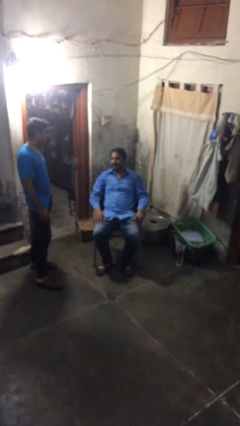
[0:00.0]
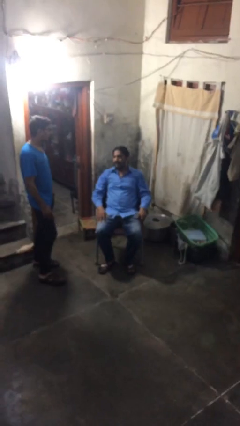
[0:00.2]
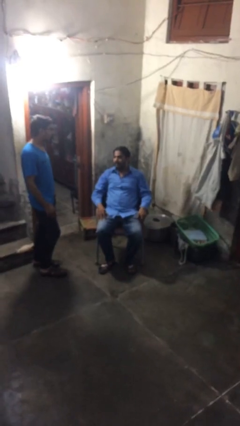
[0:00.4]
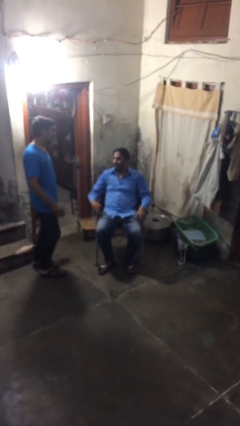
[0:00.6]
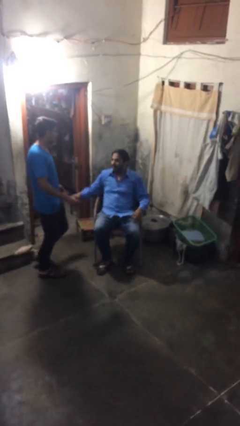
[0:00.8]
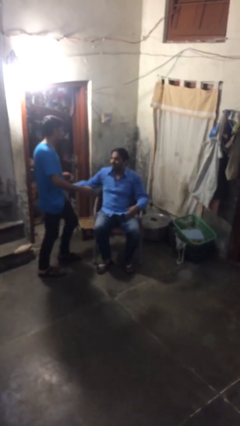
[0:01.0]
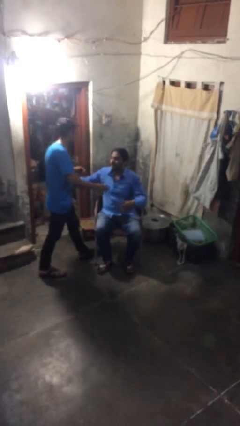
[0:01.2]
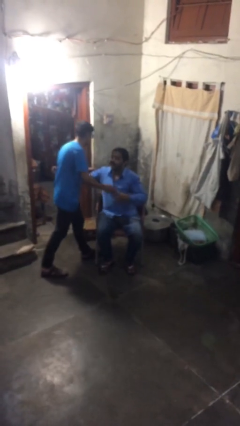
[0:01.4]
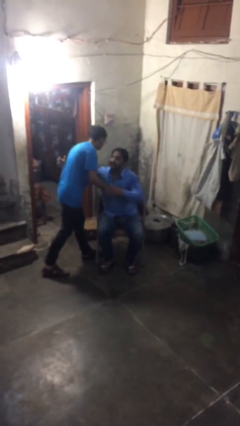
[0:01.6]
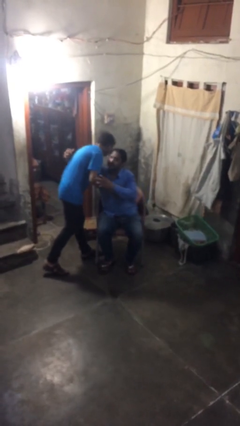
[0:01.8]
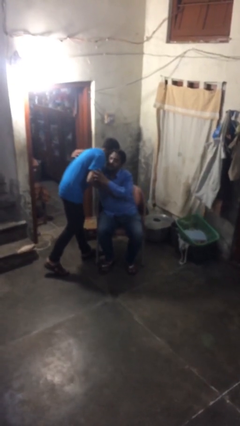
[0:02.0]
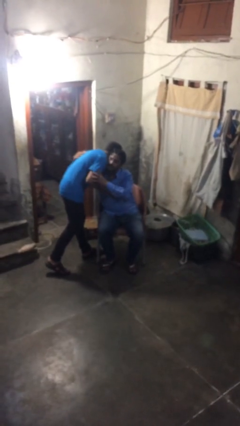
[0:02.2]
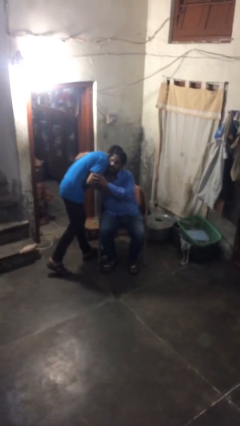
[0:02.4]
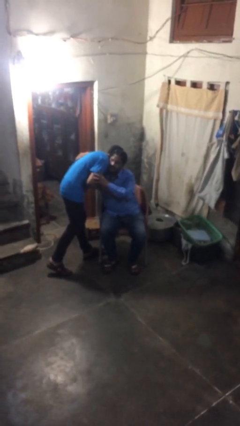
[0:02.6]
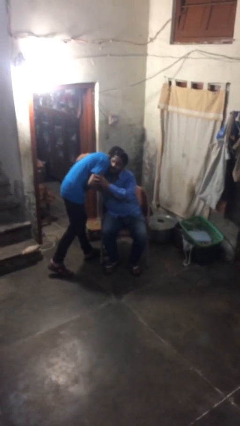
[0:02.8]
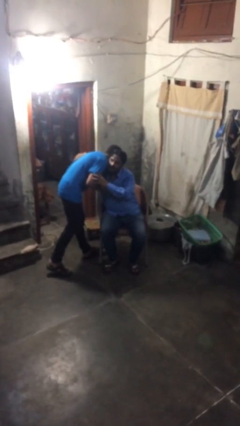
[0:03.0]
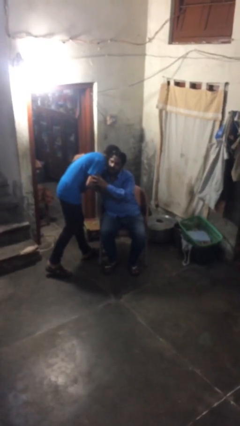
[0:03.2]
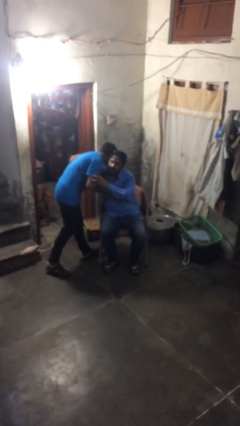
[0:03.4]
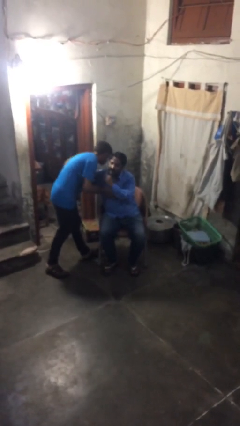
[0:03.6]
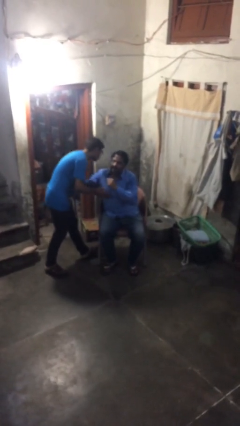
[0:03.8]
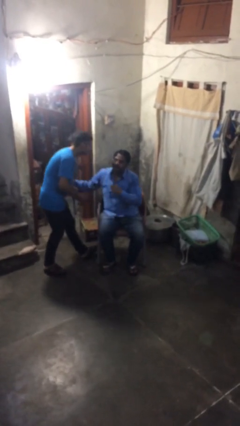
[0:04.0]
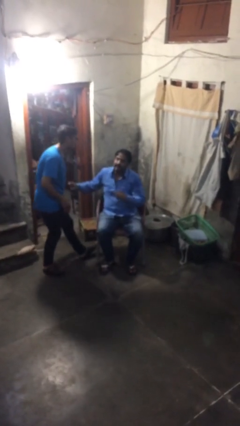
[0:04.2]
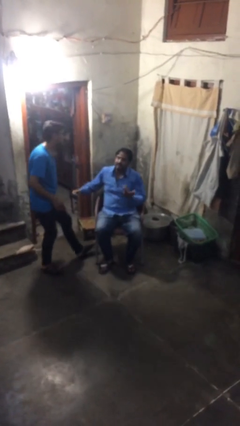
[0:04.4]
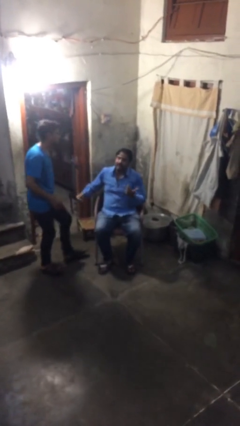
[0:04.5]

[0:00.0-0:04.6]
person embraces person

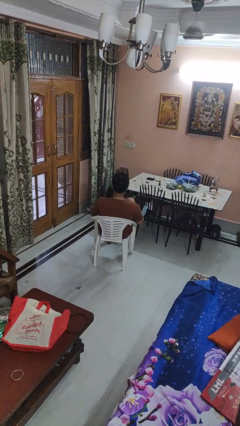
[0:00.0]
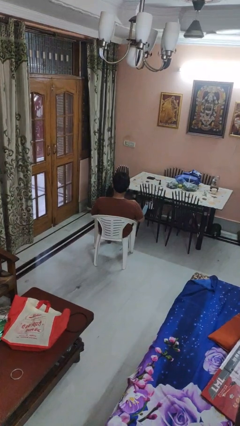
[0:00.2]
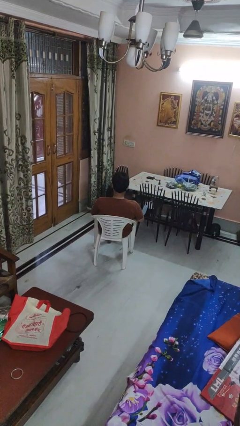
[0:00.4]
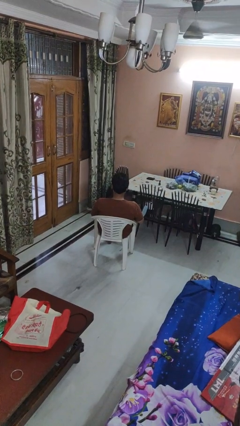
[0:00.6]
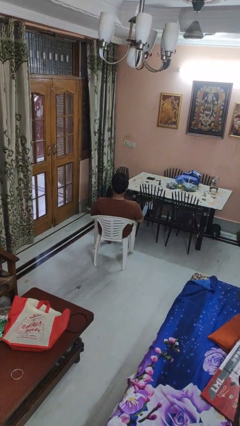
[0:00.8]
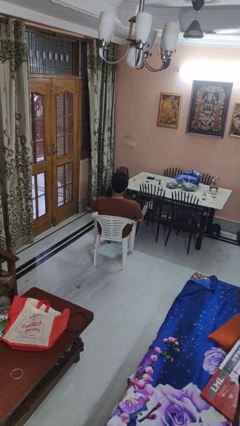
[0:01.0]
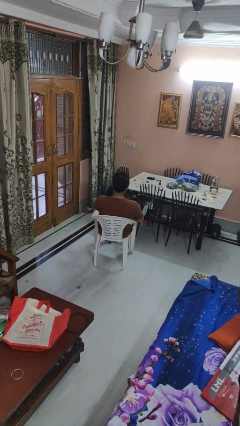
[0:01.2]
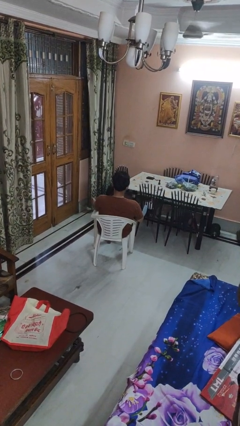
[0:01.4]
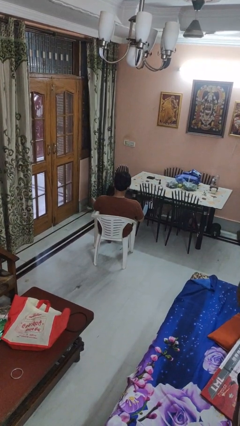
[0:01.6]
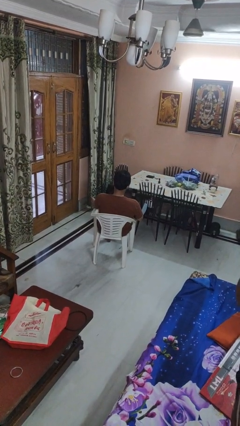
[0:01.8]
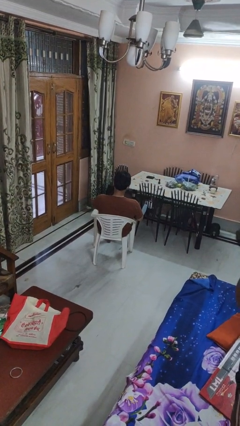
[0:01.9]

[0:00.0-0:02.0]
person rubs foot

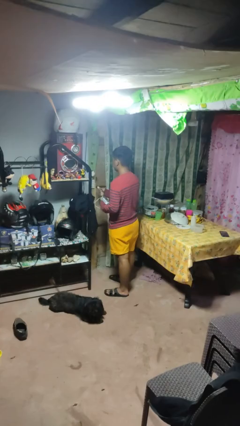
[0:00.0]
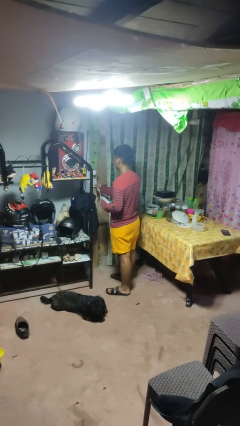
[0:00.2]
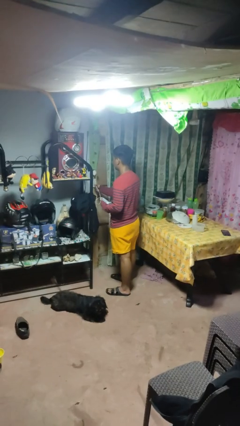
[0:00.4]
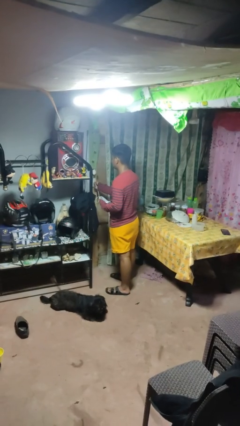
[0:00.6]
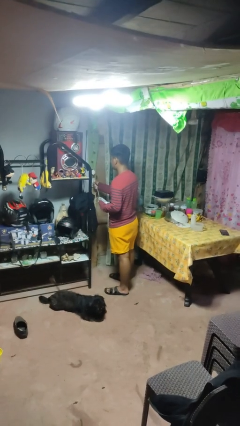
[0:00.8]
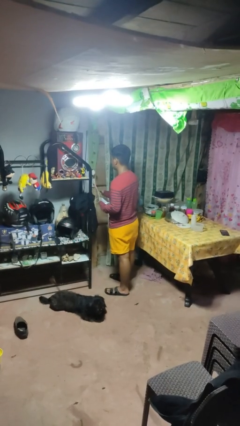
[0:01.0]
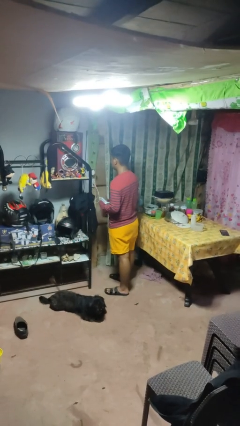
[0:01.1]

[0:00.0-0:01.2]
person plugs into electrical socket

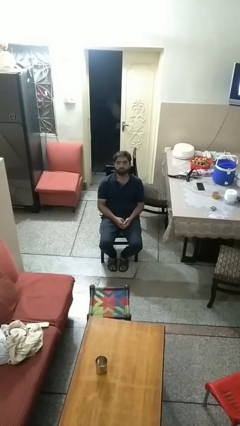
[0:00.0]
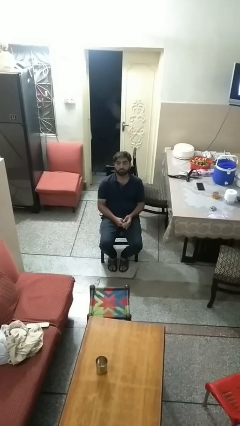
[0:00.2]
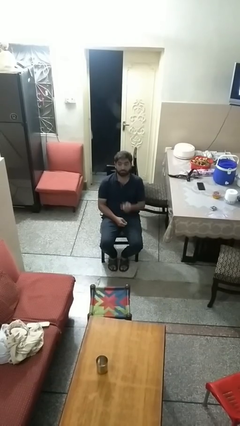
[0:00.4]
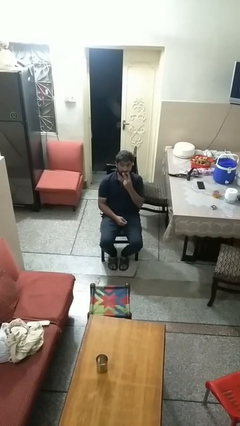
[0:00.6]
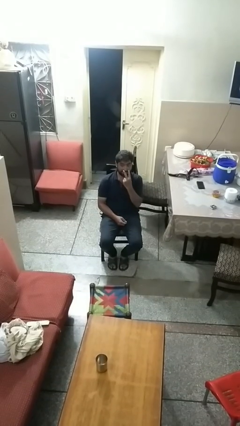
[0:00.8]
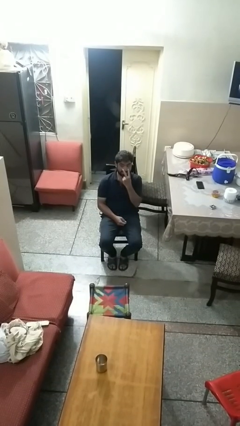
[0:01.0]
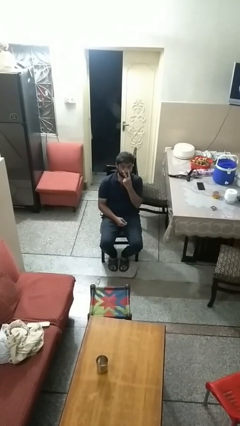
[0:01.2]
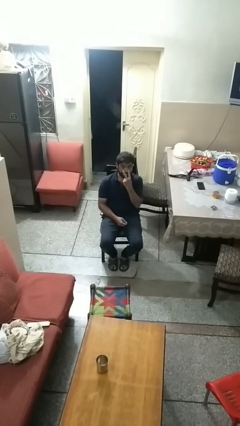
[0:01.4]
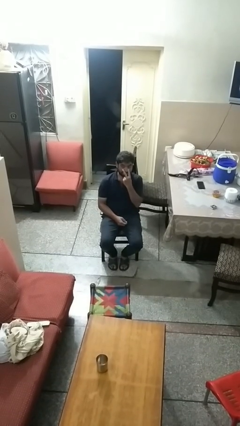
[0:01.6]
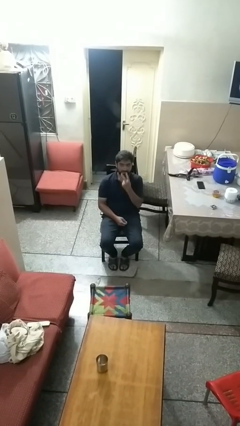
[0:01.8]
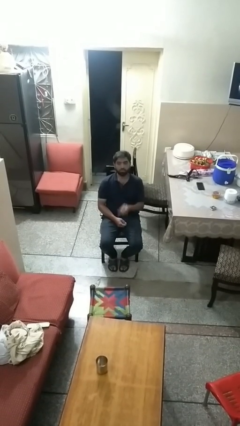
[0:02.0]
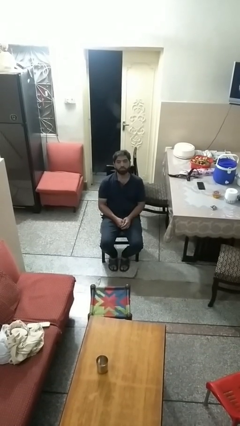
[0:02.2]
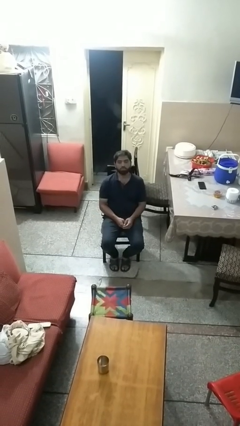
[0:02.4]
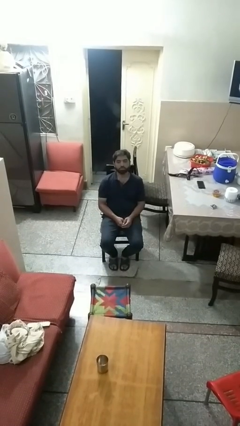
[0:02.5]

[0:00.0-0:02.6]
person gestures watch closely

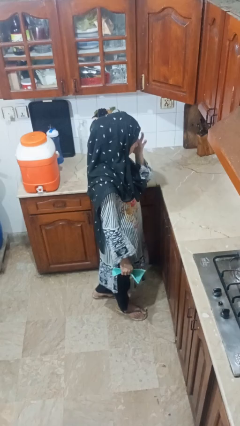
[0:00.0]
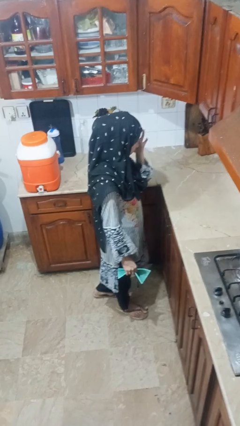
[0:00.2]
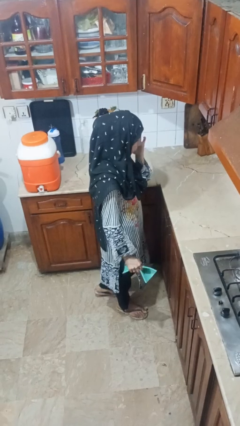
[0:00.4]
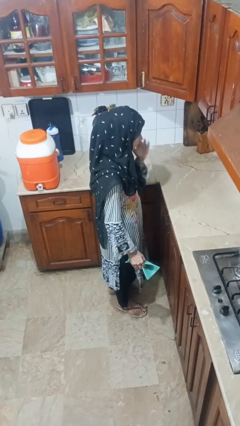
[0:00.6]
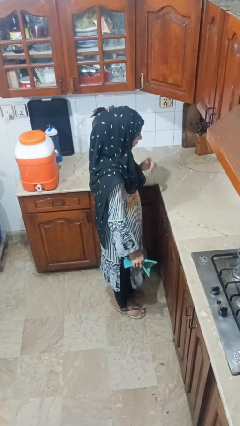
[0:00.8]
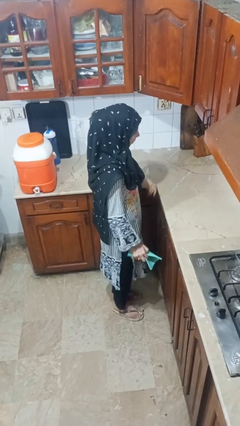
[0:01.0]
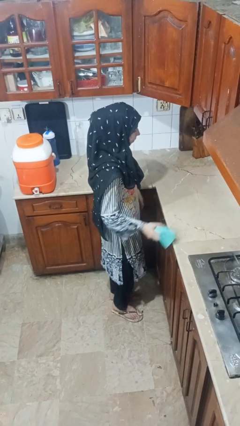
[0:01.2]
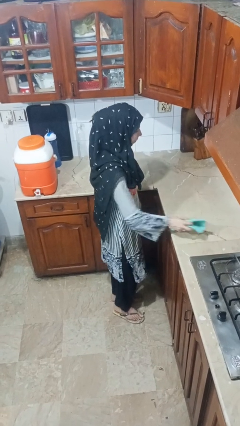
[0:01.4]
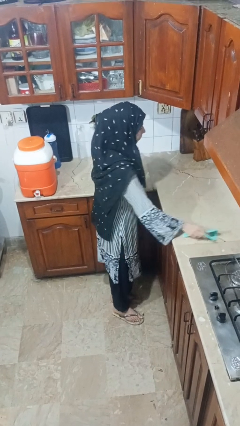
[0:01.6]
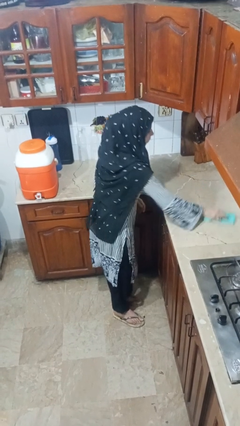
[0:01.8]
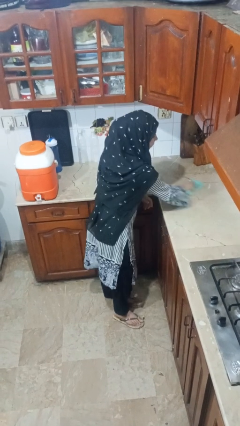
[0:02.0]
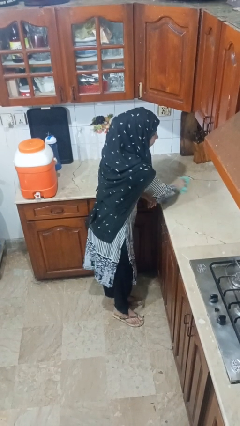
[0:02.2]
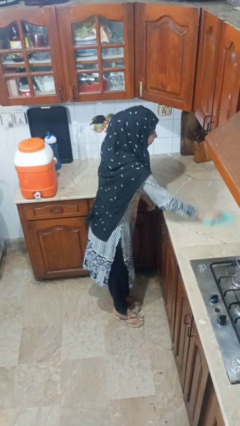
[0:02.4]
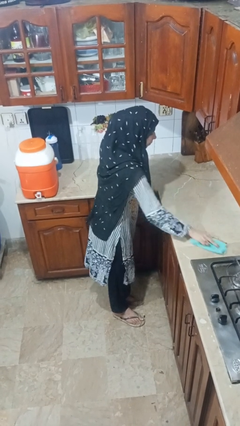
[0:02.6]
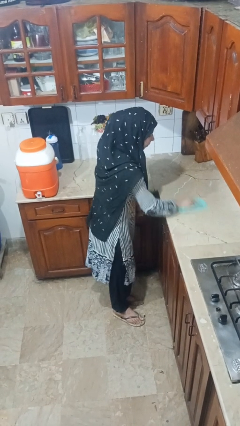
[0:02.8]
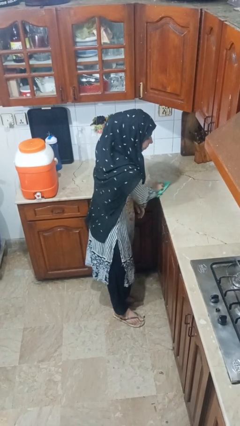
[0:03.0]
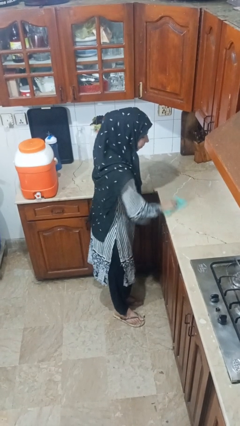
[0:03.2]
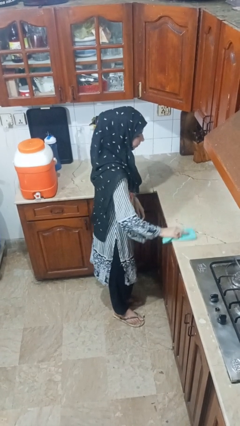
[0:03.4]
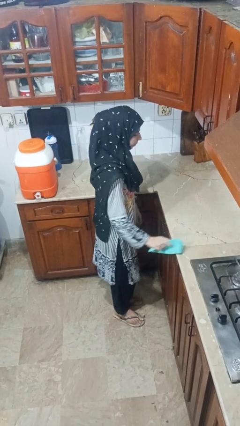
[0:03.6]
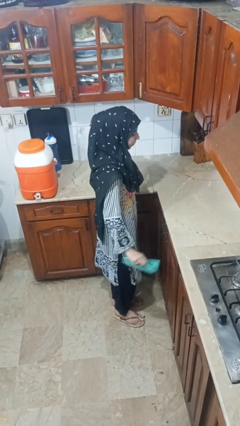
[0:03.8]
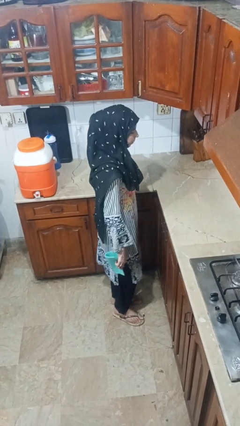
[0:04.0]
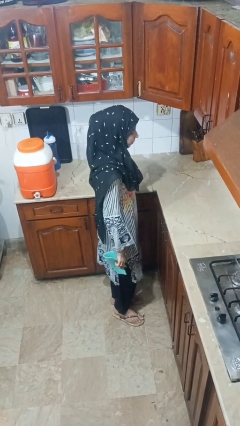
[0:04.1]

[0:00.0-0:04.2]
person cleans table with rag

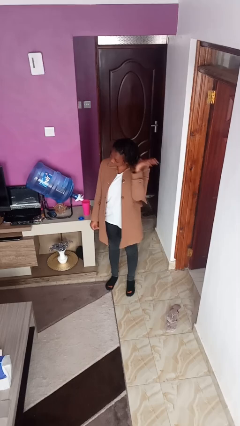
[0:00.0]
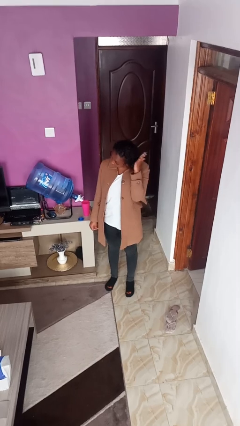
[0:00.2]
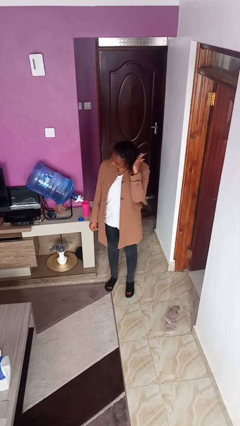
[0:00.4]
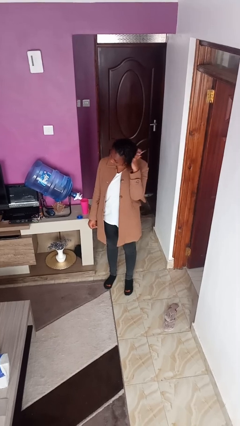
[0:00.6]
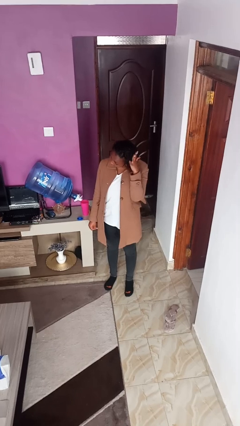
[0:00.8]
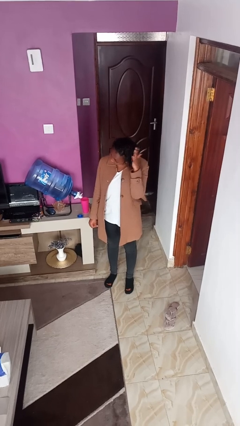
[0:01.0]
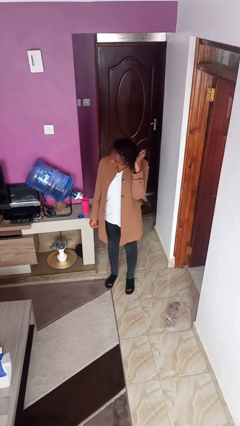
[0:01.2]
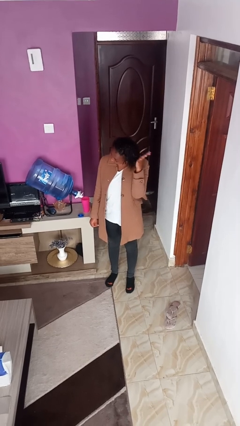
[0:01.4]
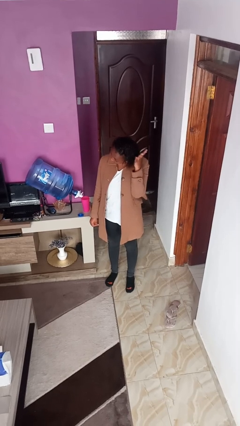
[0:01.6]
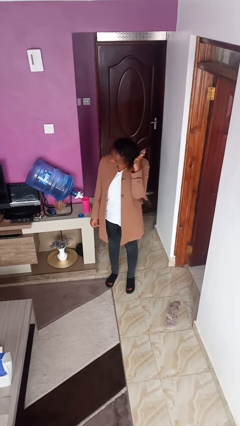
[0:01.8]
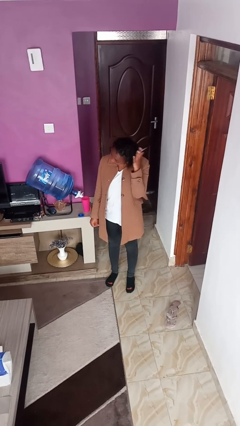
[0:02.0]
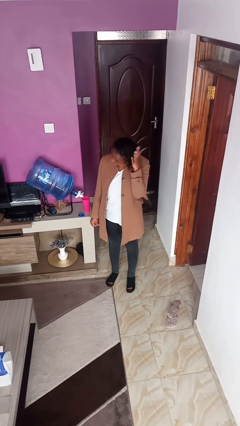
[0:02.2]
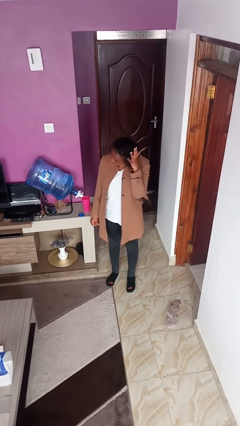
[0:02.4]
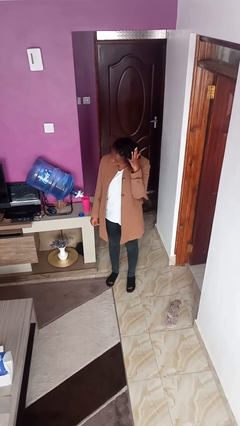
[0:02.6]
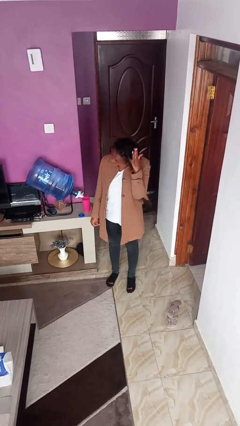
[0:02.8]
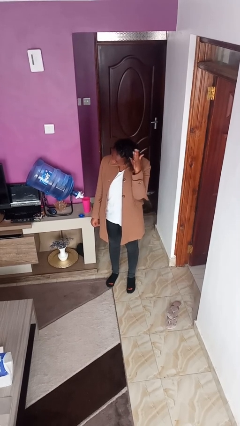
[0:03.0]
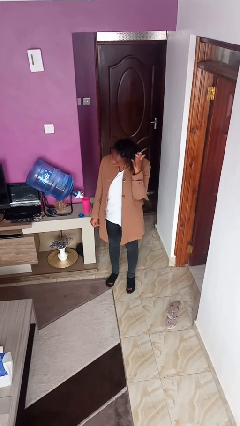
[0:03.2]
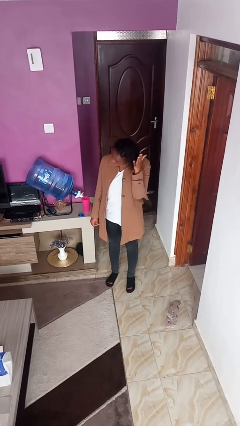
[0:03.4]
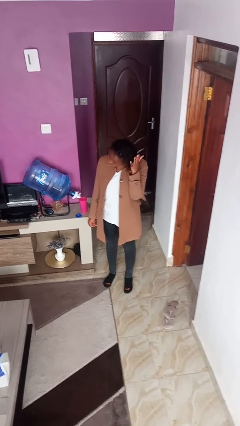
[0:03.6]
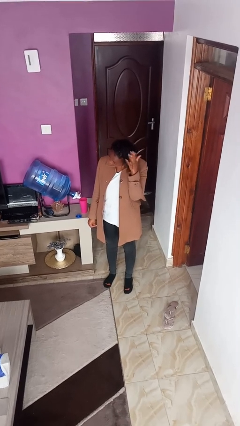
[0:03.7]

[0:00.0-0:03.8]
person scratches face
